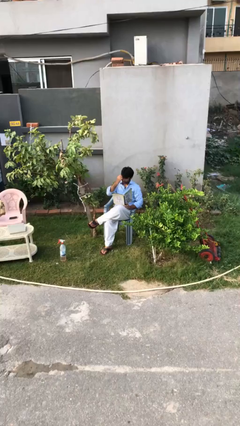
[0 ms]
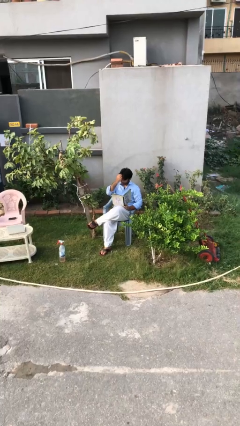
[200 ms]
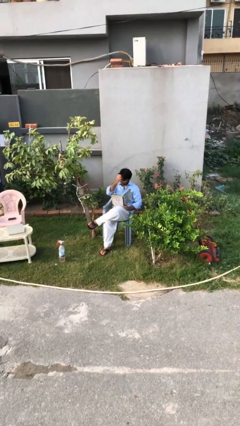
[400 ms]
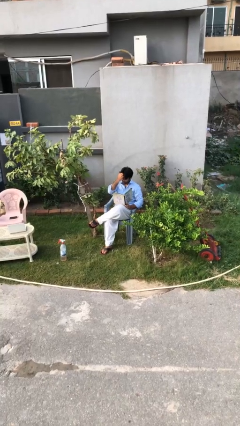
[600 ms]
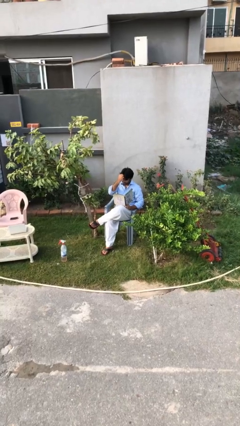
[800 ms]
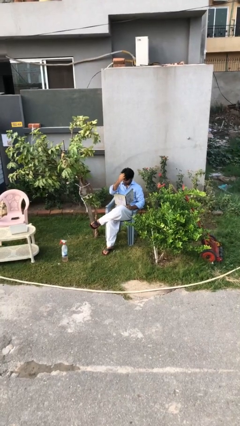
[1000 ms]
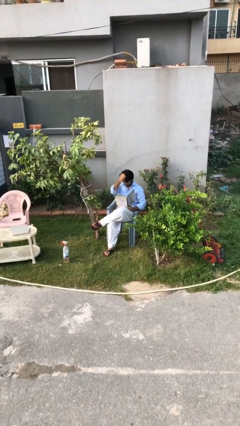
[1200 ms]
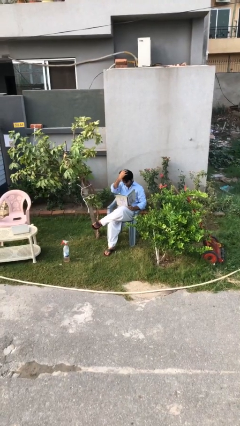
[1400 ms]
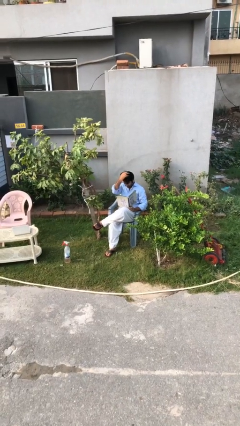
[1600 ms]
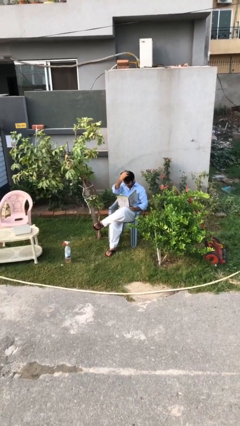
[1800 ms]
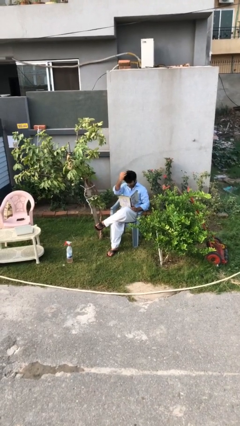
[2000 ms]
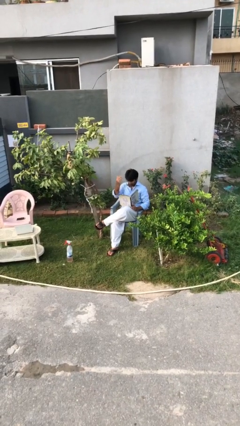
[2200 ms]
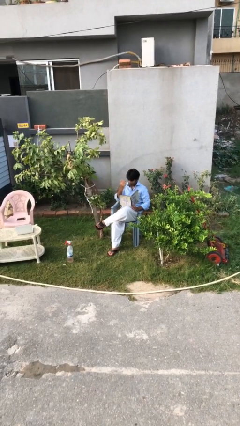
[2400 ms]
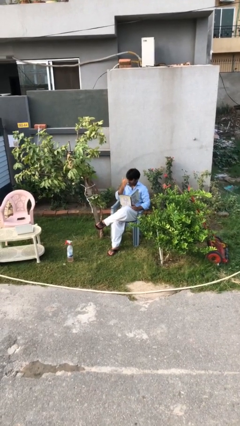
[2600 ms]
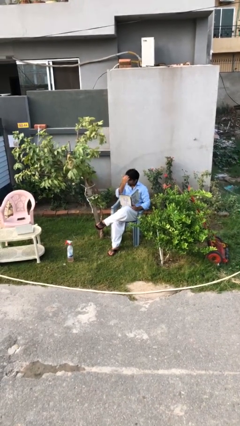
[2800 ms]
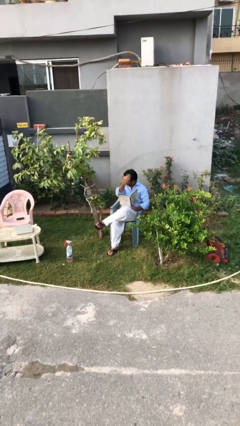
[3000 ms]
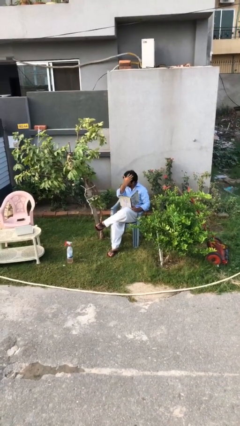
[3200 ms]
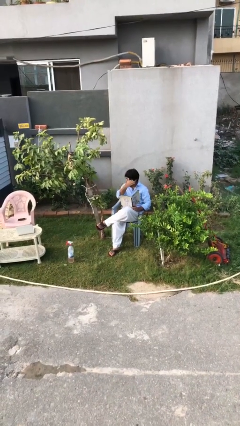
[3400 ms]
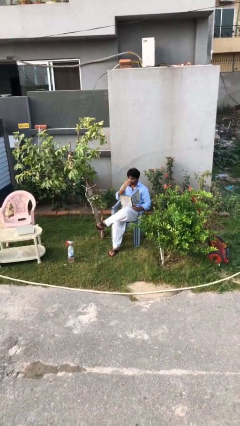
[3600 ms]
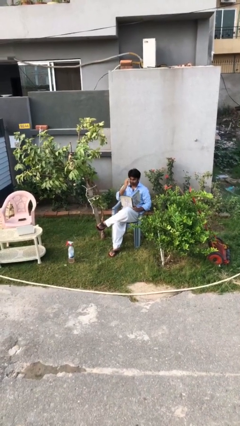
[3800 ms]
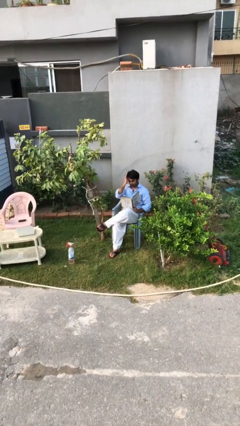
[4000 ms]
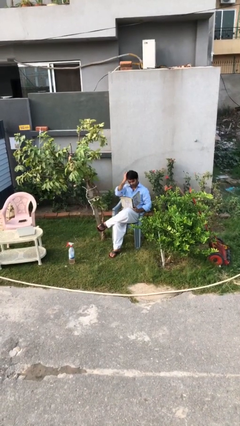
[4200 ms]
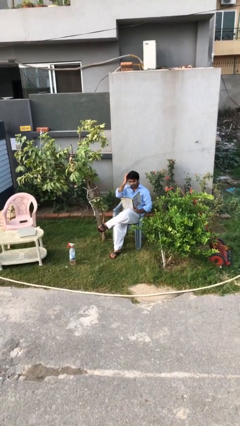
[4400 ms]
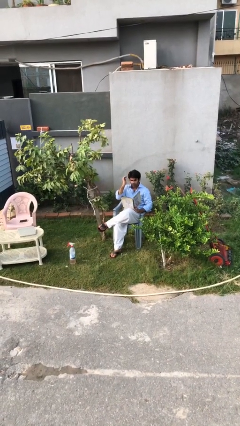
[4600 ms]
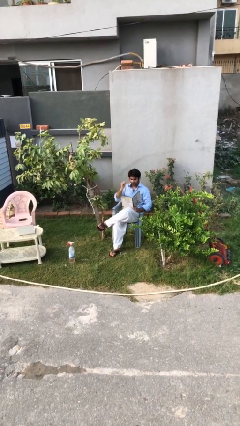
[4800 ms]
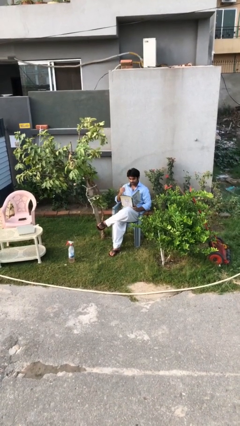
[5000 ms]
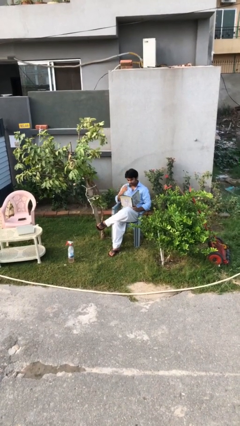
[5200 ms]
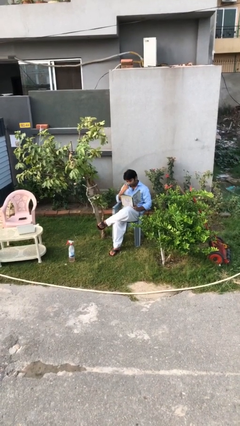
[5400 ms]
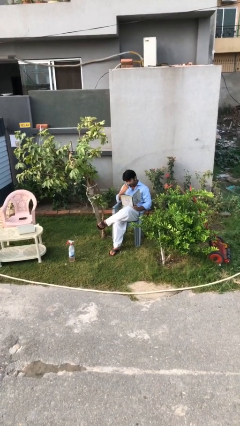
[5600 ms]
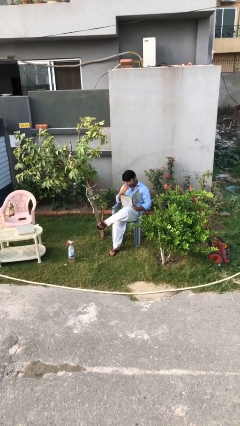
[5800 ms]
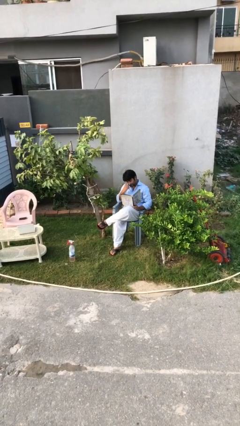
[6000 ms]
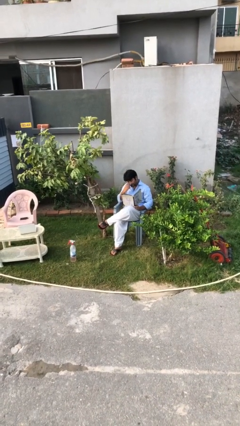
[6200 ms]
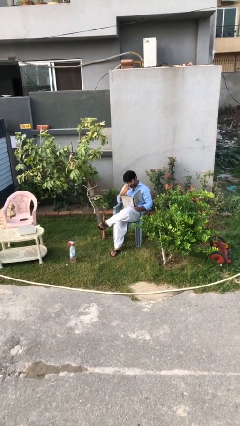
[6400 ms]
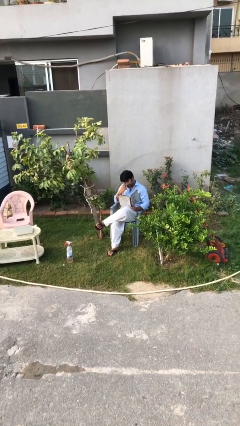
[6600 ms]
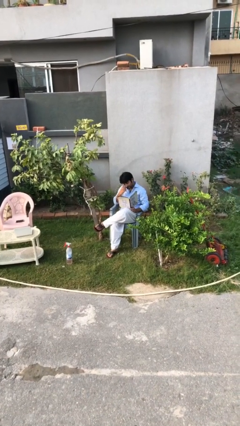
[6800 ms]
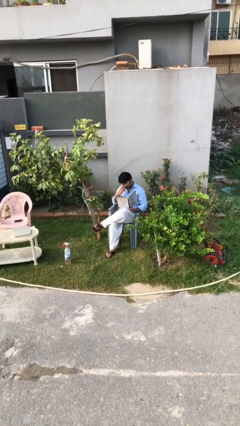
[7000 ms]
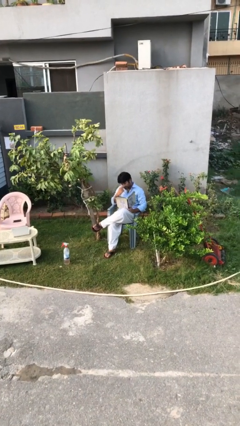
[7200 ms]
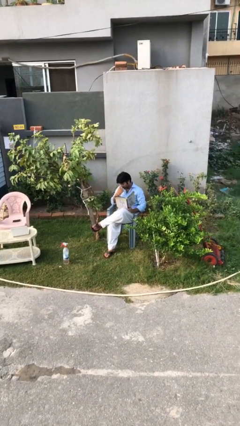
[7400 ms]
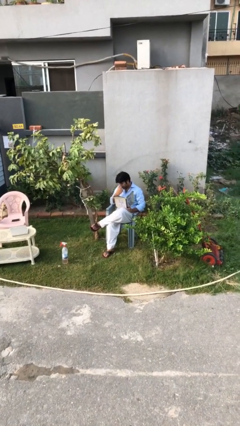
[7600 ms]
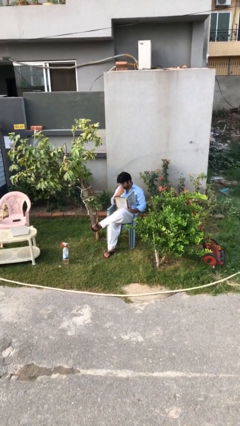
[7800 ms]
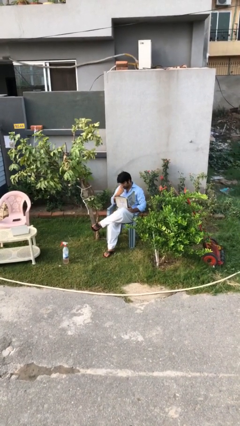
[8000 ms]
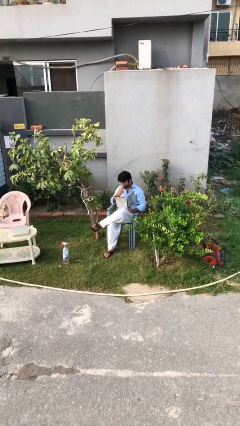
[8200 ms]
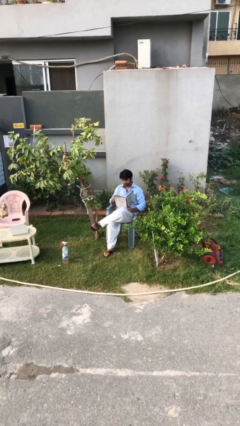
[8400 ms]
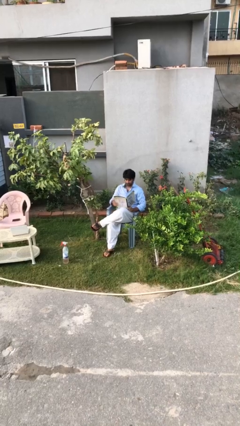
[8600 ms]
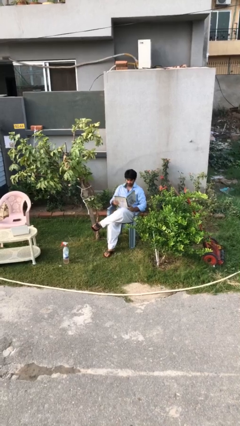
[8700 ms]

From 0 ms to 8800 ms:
person reads document

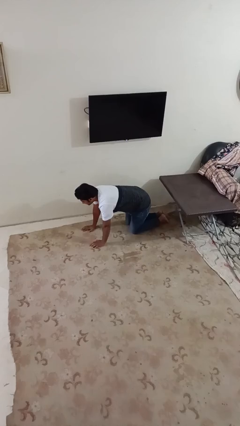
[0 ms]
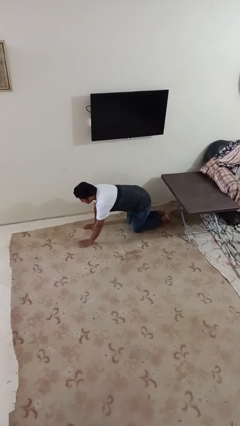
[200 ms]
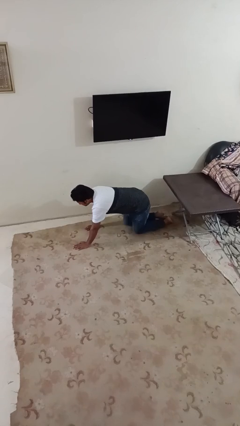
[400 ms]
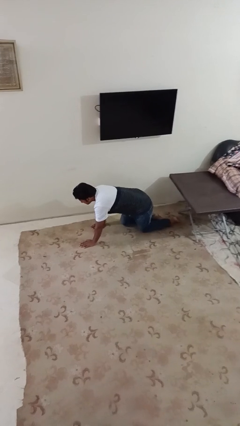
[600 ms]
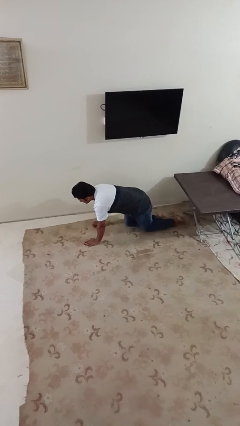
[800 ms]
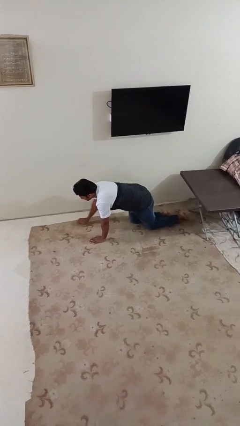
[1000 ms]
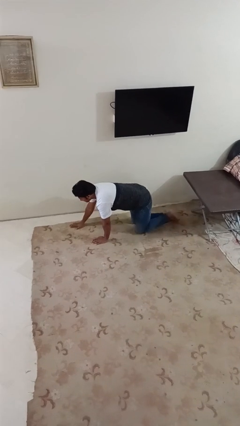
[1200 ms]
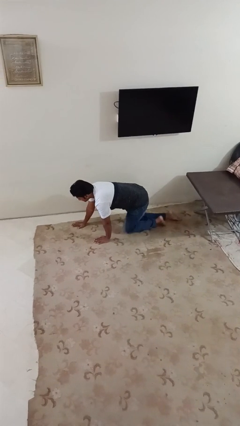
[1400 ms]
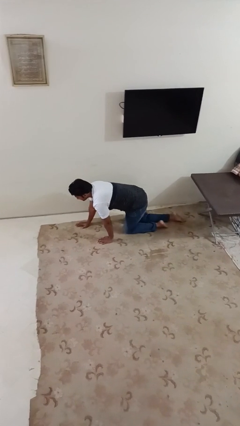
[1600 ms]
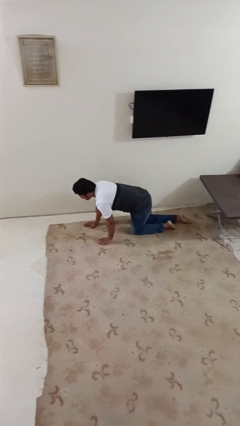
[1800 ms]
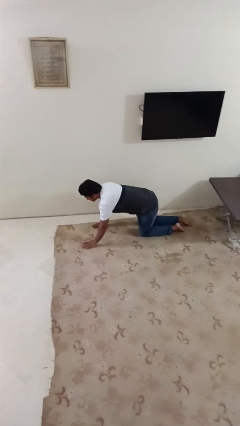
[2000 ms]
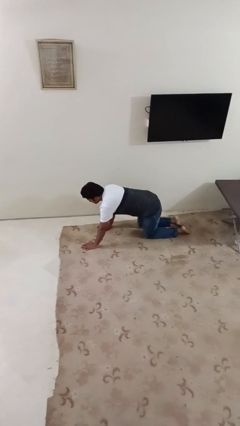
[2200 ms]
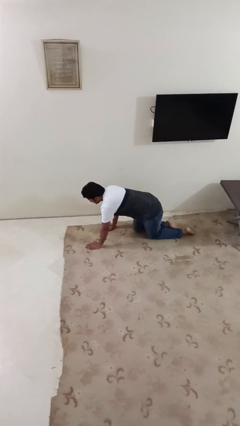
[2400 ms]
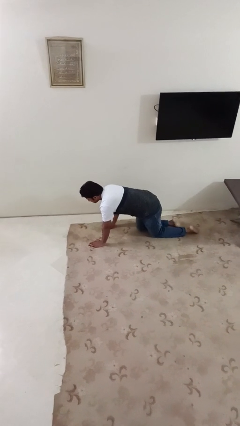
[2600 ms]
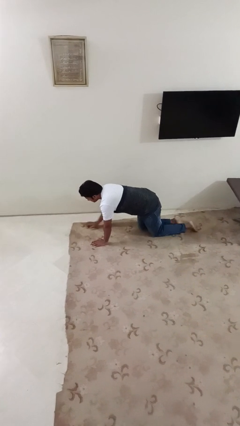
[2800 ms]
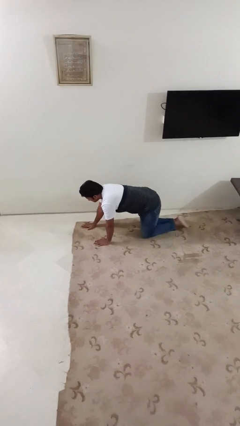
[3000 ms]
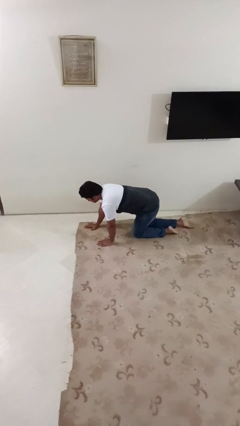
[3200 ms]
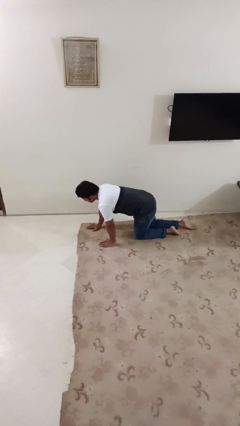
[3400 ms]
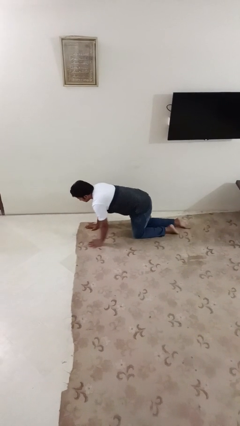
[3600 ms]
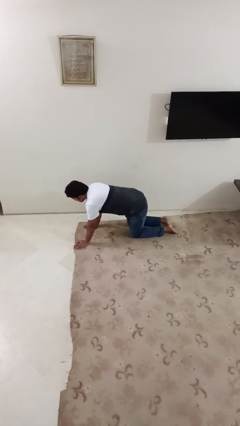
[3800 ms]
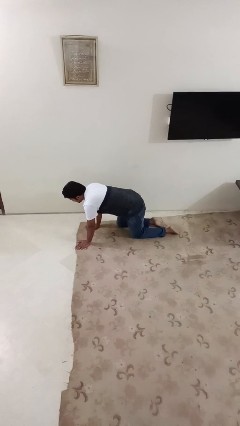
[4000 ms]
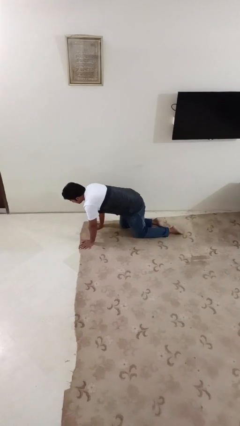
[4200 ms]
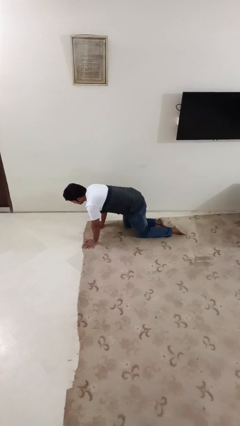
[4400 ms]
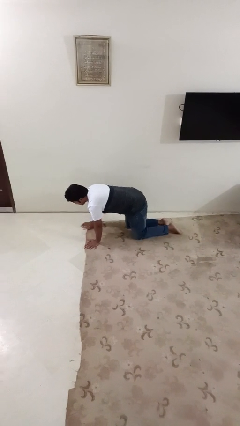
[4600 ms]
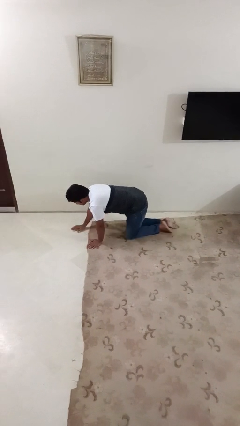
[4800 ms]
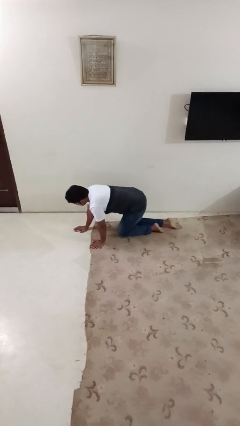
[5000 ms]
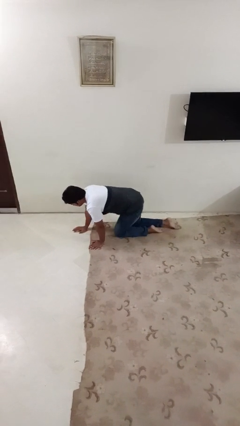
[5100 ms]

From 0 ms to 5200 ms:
person crawls

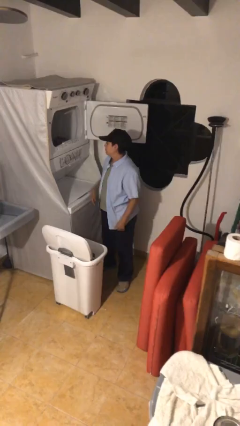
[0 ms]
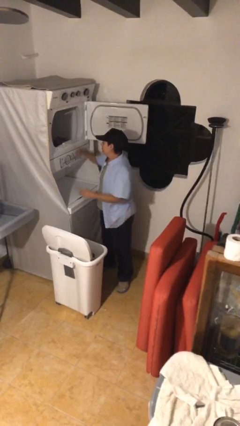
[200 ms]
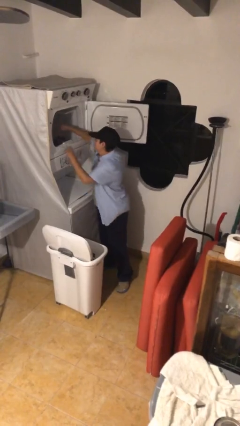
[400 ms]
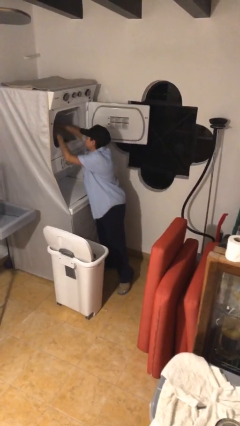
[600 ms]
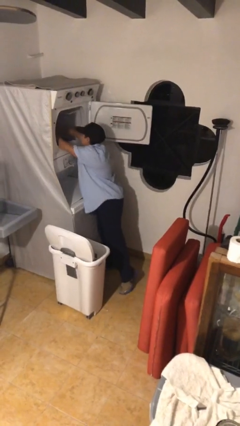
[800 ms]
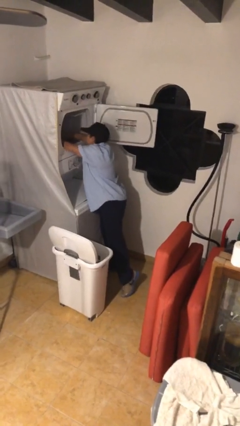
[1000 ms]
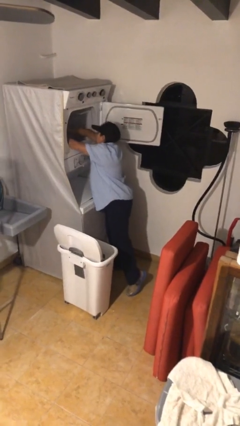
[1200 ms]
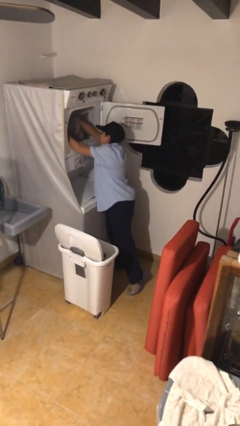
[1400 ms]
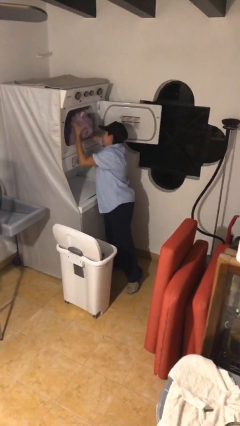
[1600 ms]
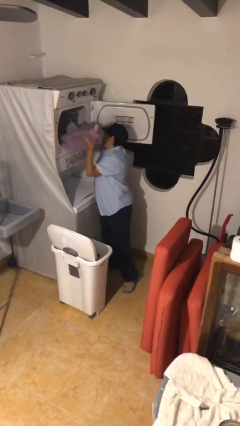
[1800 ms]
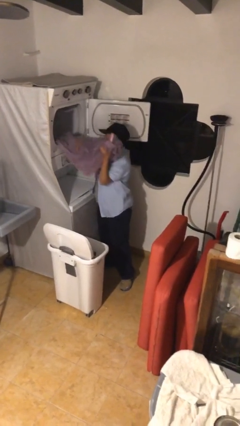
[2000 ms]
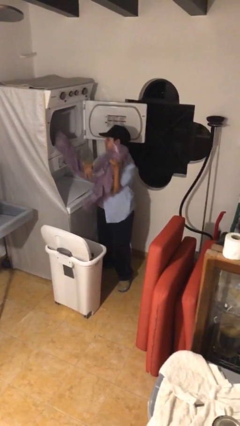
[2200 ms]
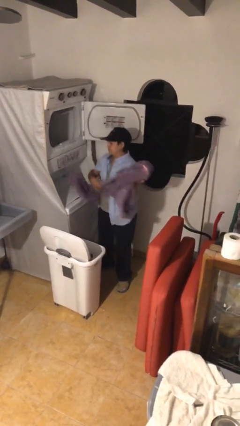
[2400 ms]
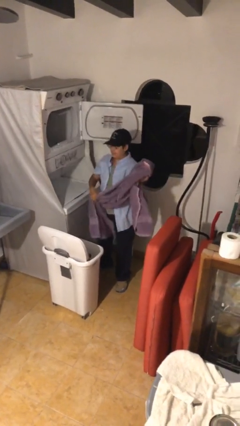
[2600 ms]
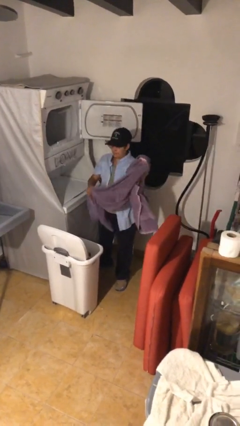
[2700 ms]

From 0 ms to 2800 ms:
person unloads dryer

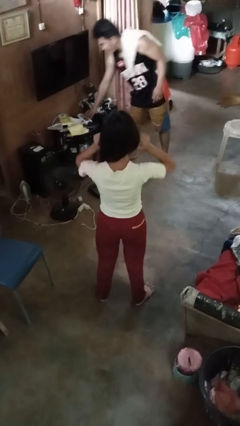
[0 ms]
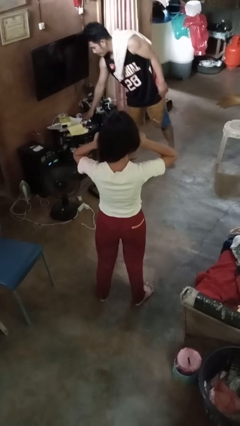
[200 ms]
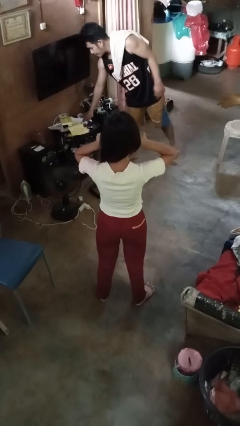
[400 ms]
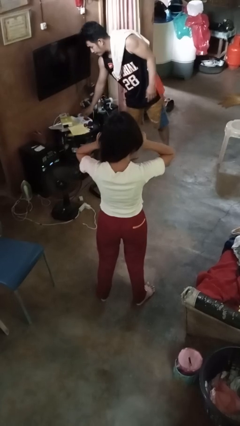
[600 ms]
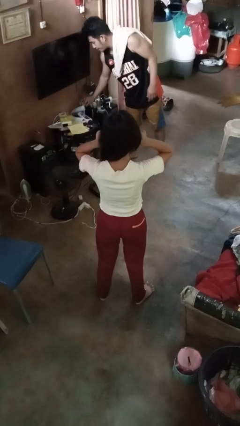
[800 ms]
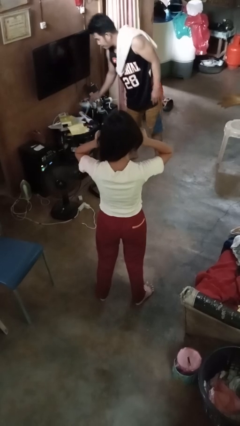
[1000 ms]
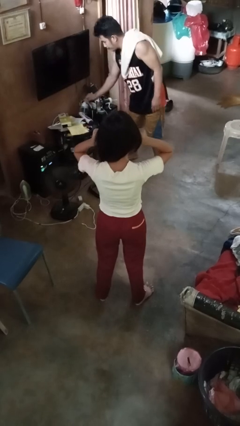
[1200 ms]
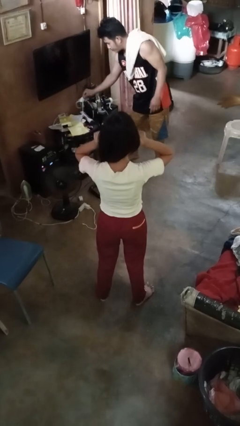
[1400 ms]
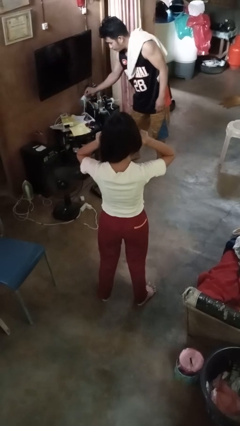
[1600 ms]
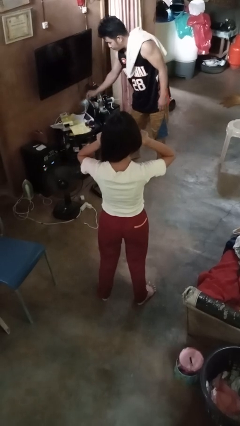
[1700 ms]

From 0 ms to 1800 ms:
person touches earlobe
